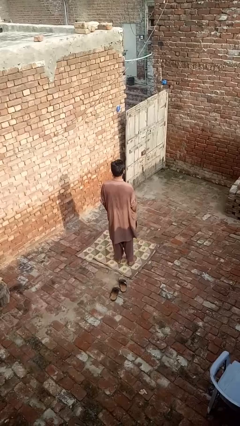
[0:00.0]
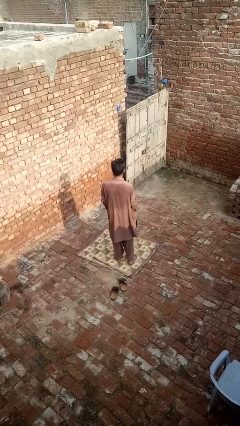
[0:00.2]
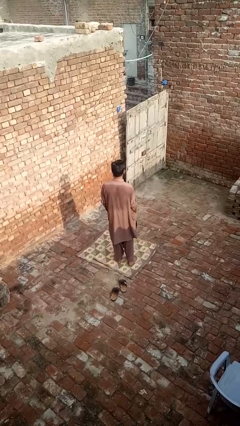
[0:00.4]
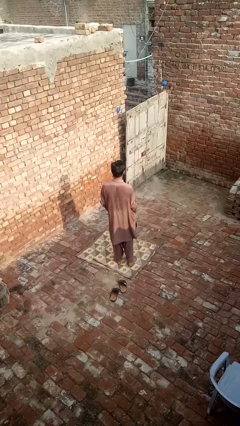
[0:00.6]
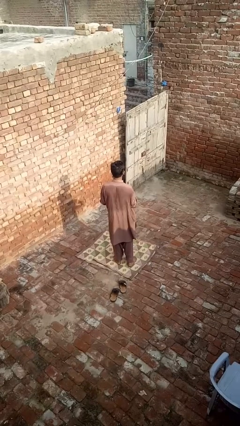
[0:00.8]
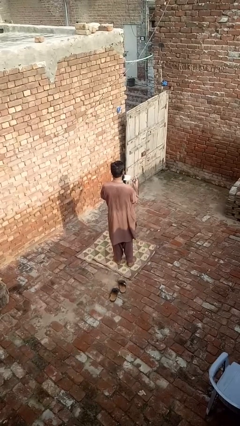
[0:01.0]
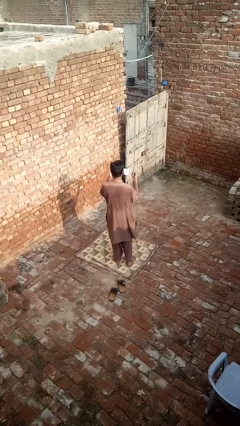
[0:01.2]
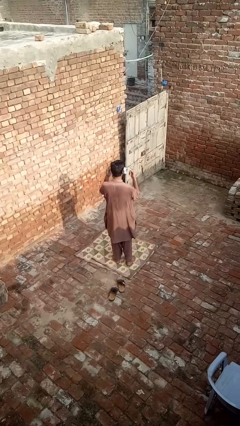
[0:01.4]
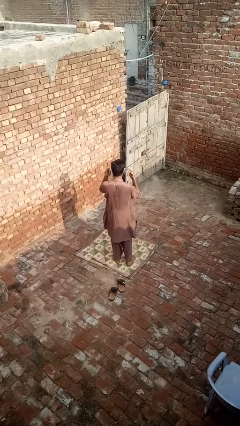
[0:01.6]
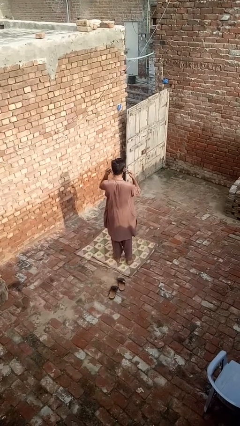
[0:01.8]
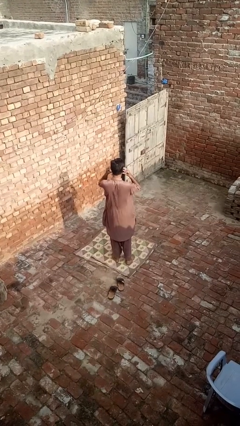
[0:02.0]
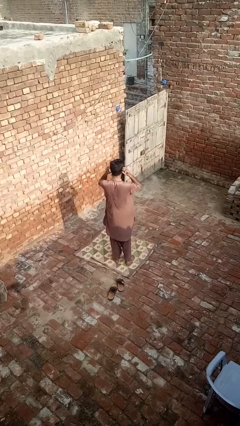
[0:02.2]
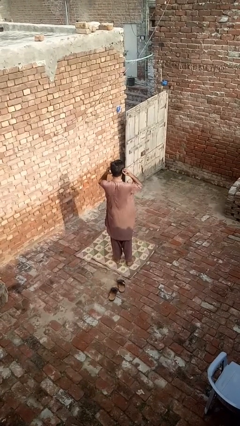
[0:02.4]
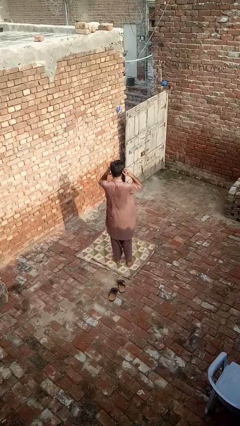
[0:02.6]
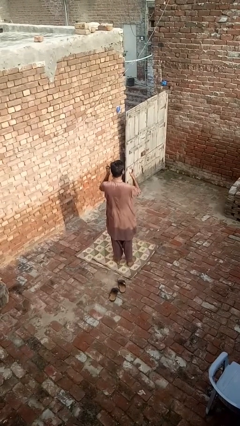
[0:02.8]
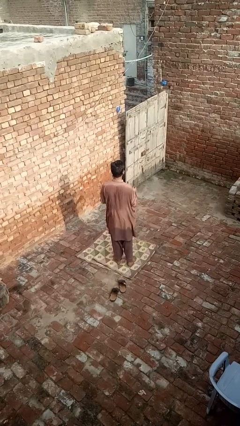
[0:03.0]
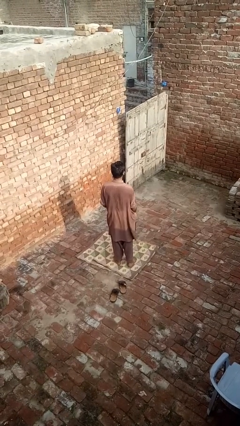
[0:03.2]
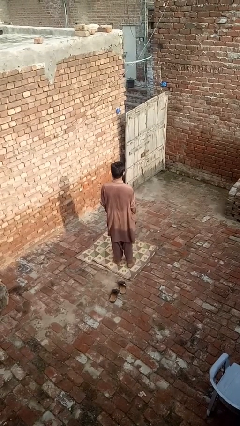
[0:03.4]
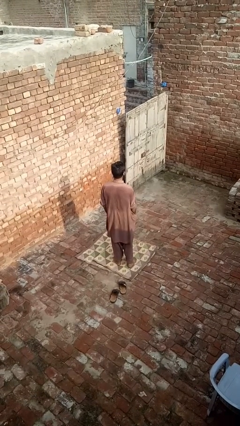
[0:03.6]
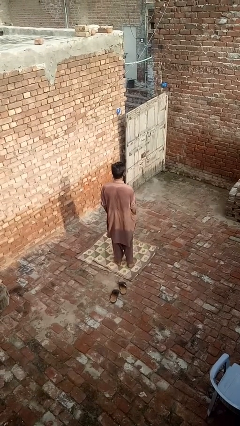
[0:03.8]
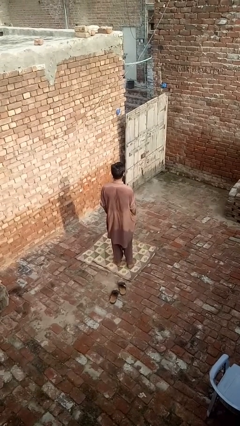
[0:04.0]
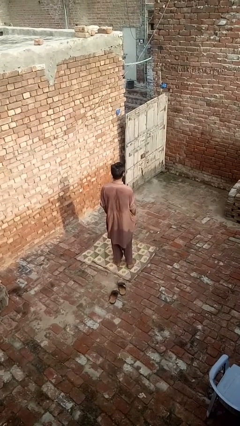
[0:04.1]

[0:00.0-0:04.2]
person puts on facemask

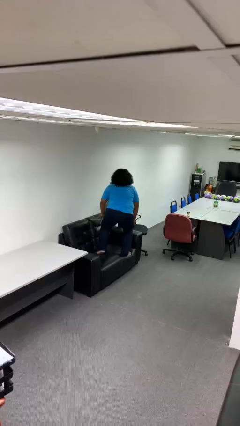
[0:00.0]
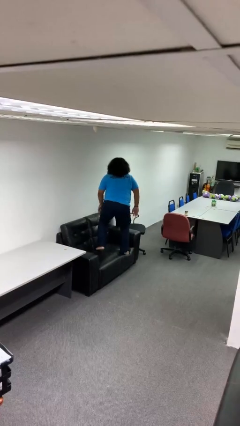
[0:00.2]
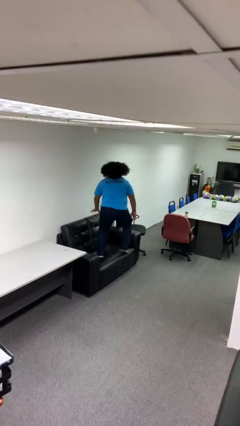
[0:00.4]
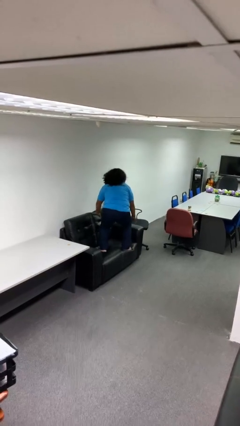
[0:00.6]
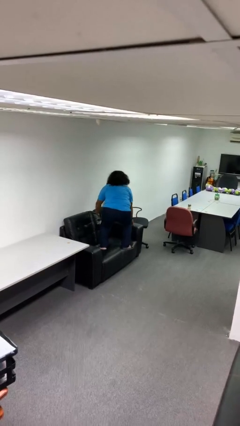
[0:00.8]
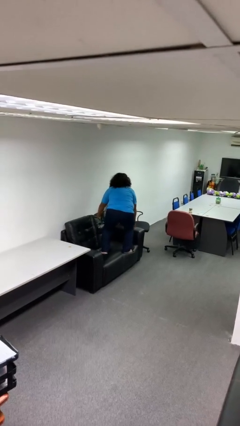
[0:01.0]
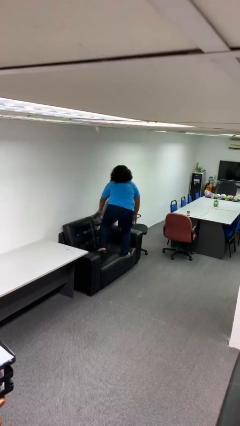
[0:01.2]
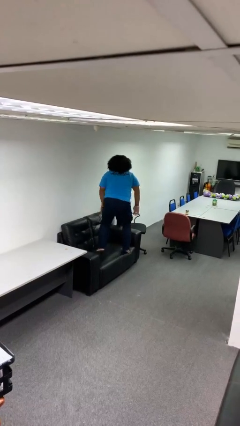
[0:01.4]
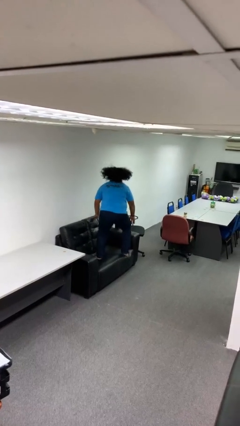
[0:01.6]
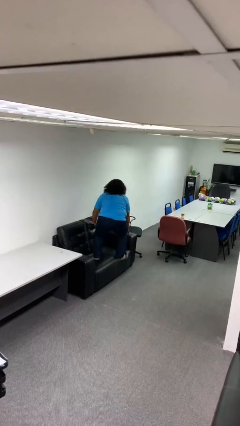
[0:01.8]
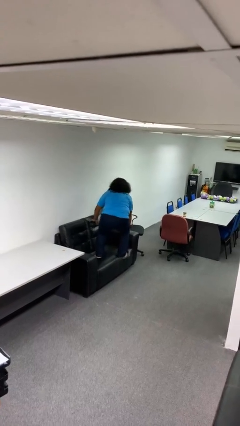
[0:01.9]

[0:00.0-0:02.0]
person jumps on couch

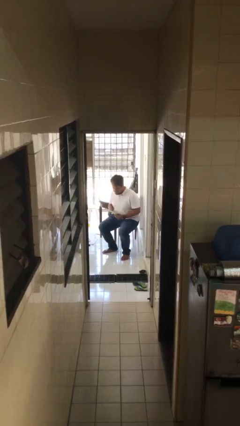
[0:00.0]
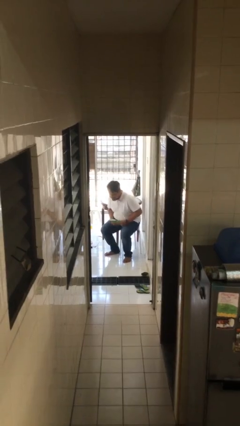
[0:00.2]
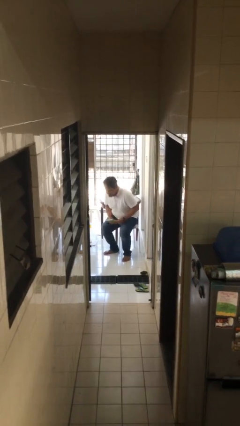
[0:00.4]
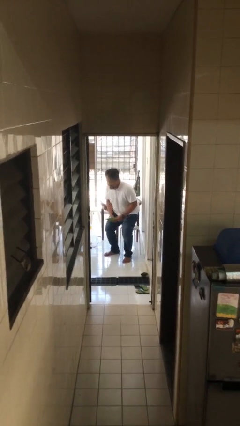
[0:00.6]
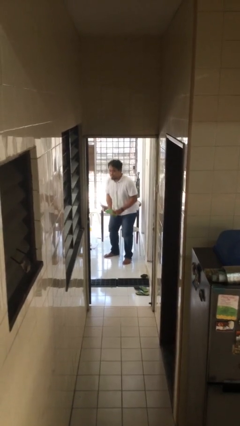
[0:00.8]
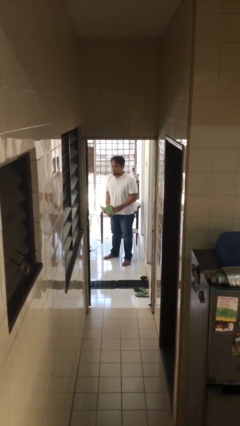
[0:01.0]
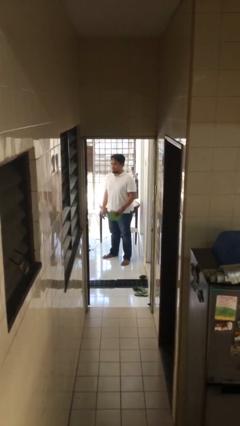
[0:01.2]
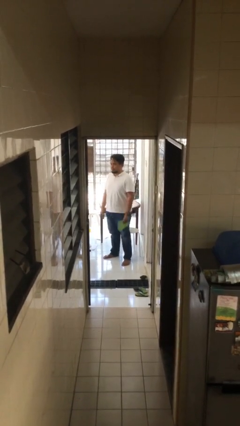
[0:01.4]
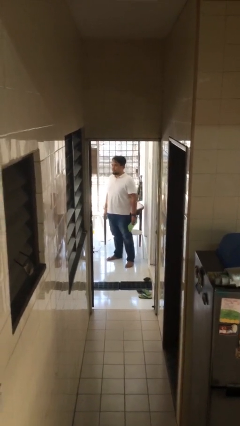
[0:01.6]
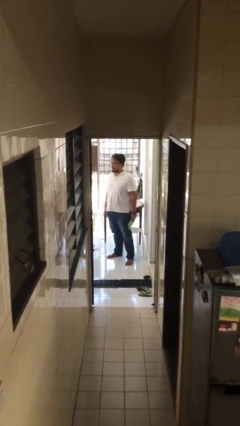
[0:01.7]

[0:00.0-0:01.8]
person stands up

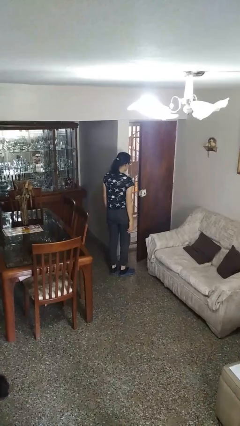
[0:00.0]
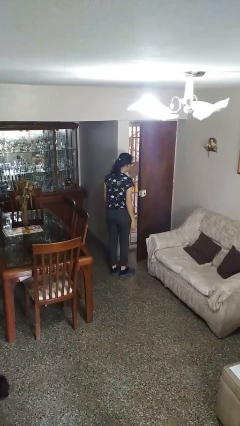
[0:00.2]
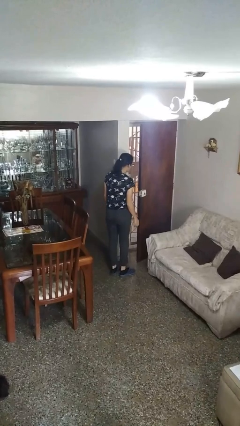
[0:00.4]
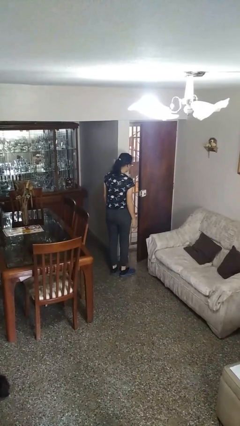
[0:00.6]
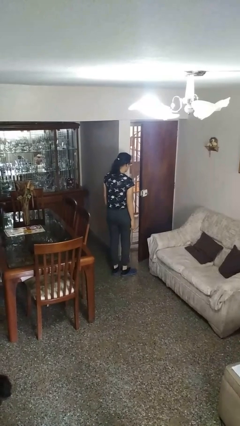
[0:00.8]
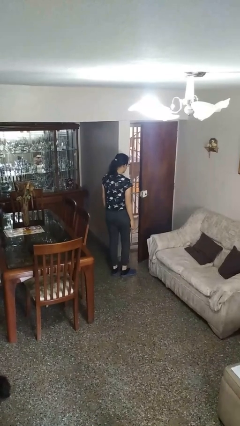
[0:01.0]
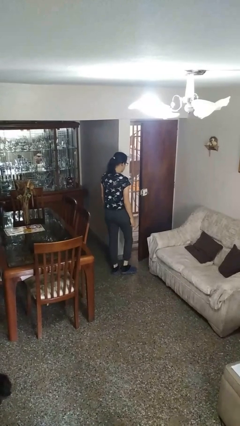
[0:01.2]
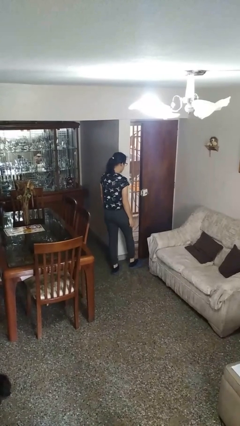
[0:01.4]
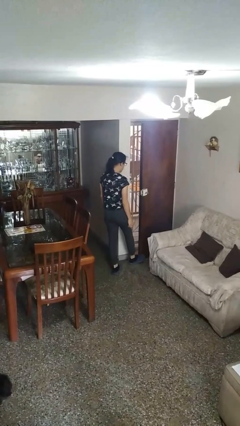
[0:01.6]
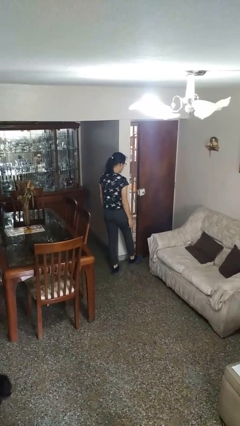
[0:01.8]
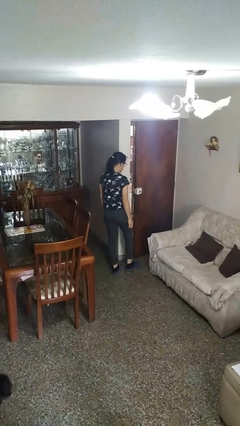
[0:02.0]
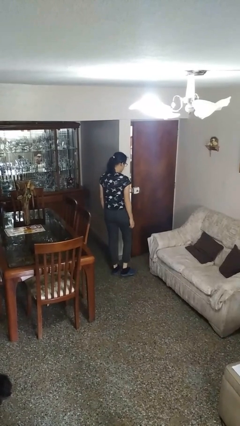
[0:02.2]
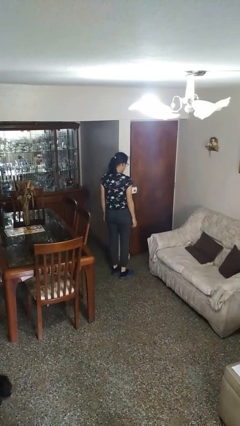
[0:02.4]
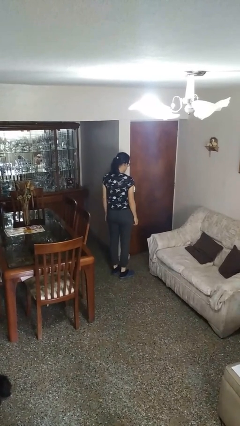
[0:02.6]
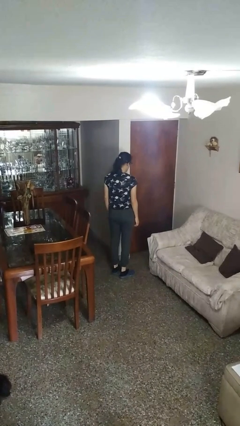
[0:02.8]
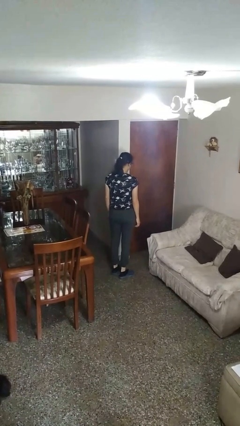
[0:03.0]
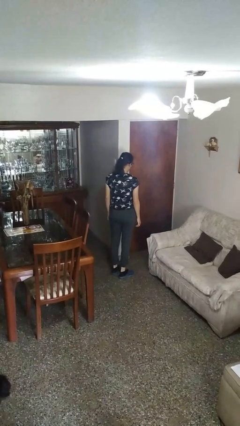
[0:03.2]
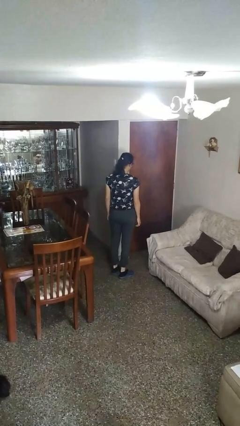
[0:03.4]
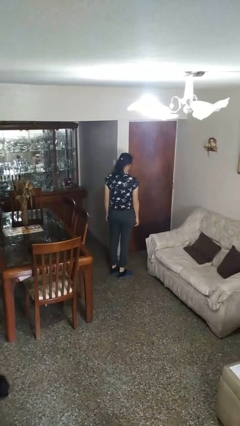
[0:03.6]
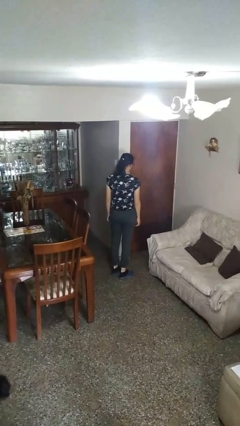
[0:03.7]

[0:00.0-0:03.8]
person closes door with foot

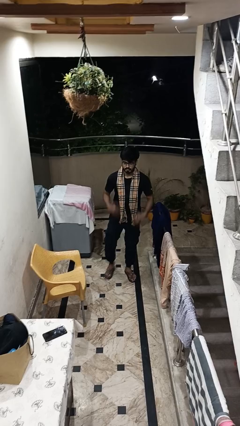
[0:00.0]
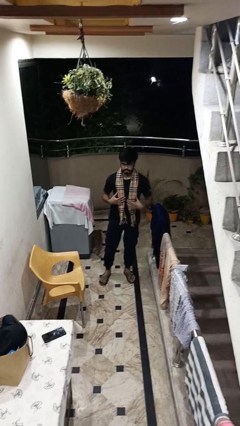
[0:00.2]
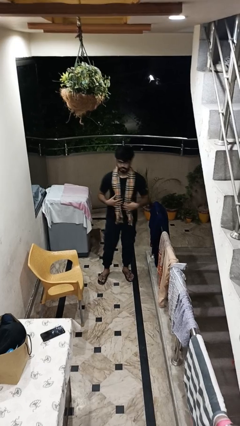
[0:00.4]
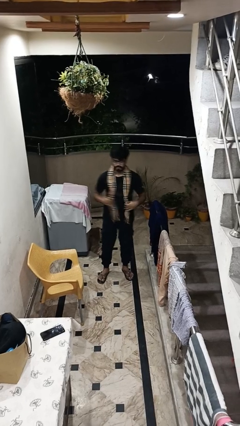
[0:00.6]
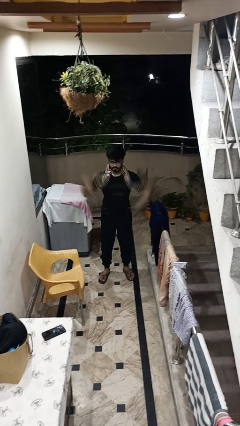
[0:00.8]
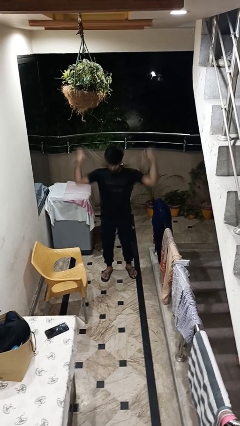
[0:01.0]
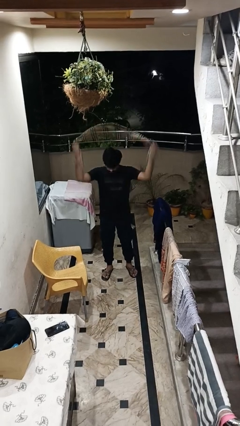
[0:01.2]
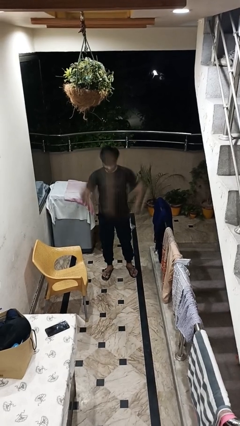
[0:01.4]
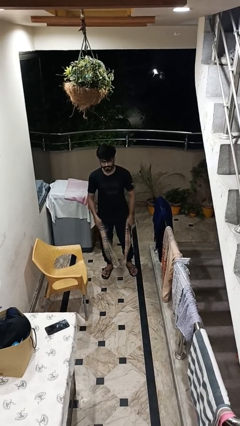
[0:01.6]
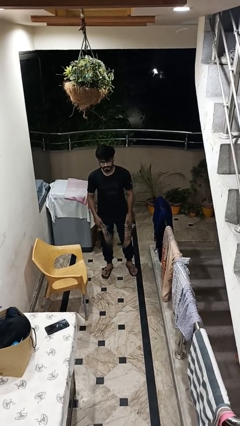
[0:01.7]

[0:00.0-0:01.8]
person takes off scarf

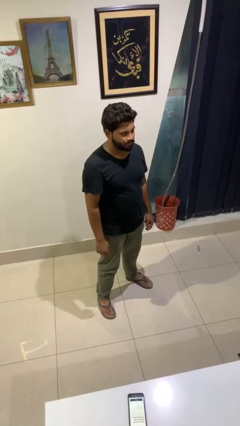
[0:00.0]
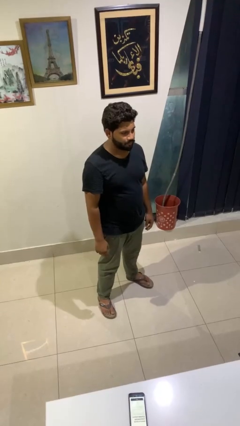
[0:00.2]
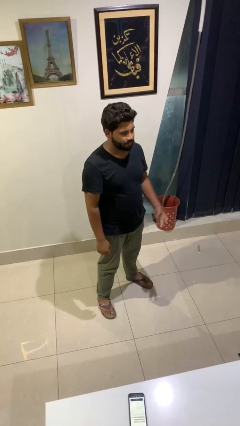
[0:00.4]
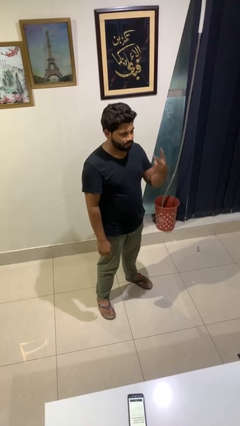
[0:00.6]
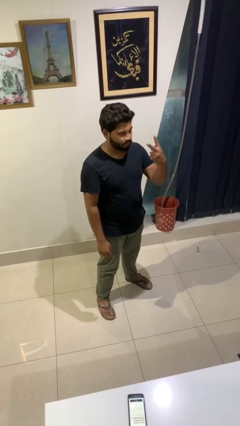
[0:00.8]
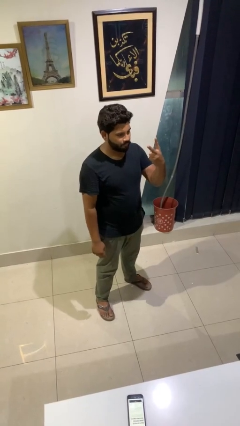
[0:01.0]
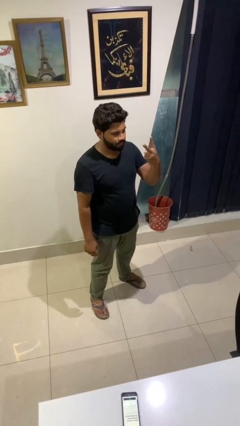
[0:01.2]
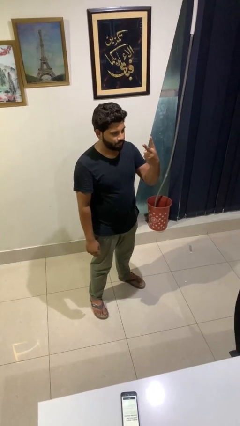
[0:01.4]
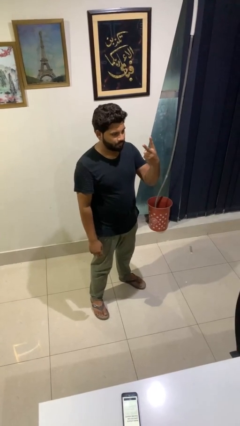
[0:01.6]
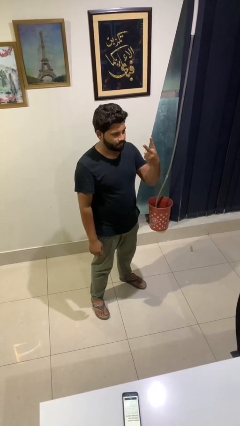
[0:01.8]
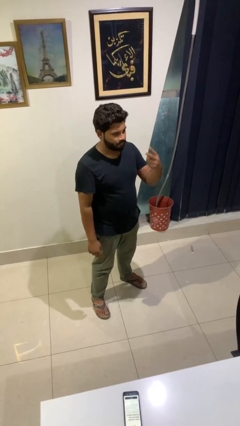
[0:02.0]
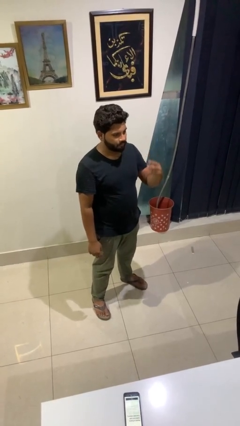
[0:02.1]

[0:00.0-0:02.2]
person gestures peace

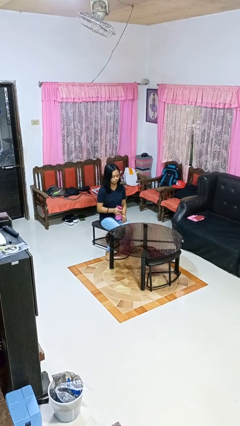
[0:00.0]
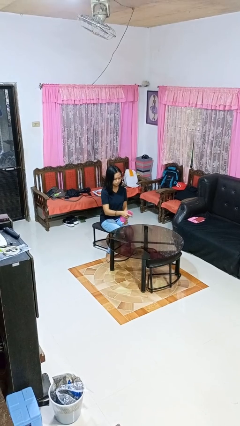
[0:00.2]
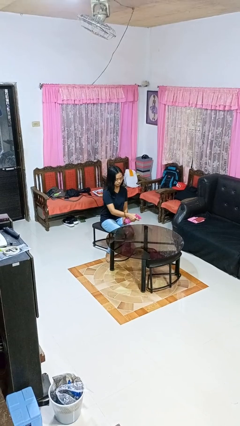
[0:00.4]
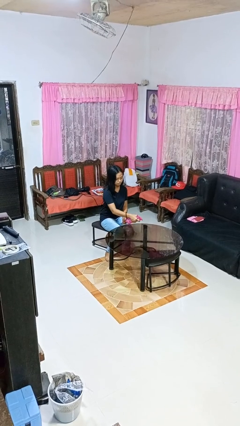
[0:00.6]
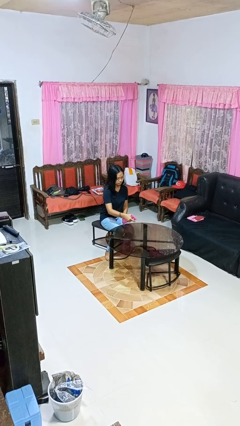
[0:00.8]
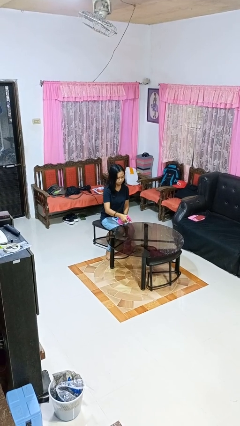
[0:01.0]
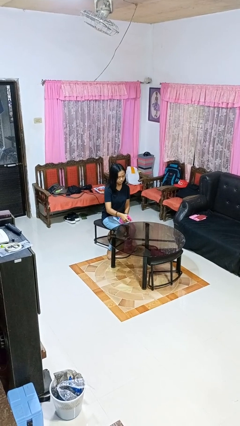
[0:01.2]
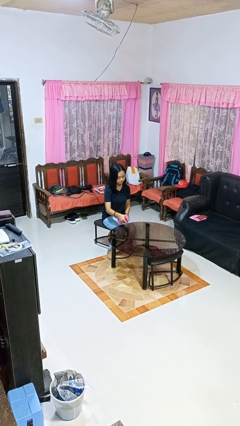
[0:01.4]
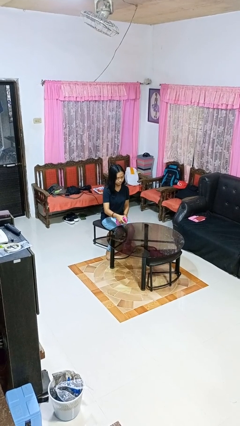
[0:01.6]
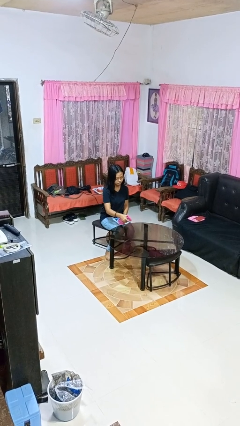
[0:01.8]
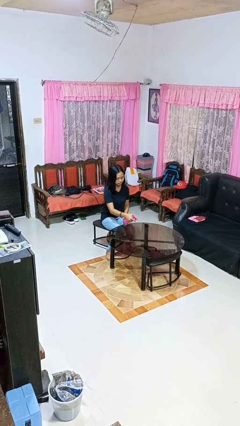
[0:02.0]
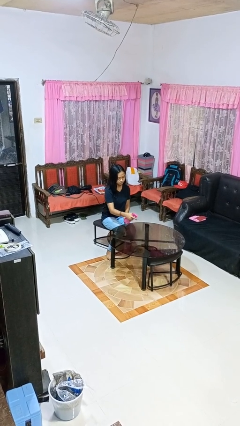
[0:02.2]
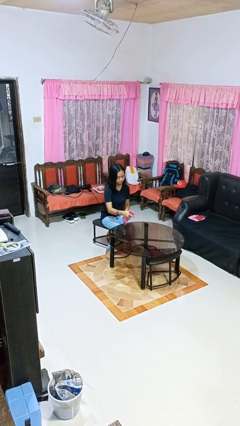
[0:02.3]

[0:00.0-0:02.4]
person sprays from bottle
